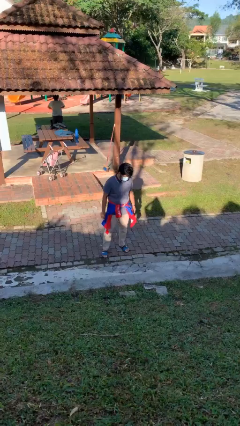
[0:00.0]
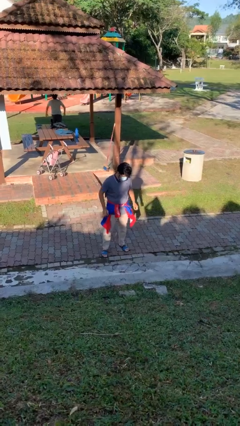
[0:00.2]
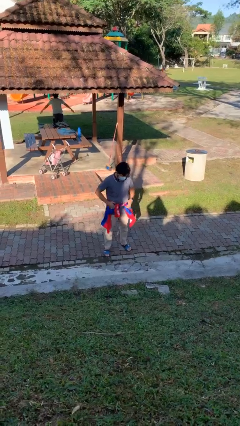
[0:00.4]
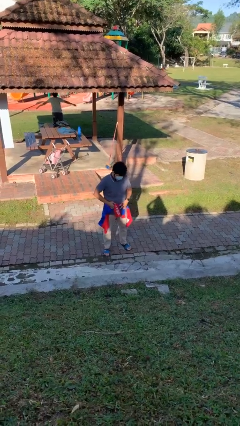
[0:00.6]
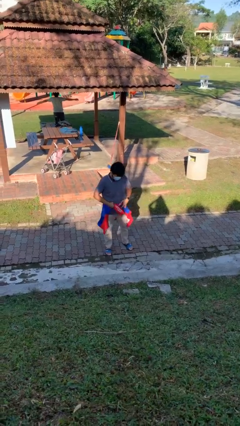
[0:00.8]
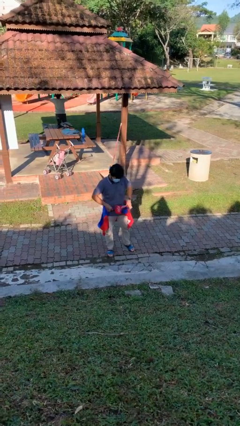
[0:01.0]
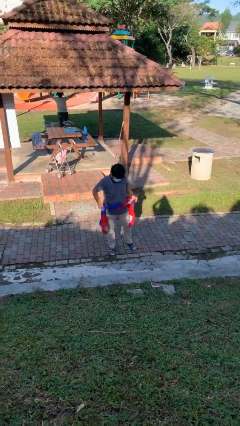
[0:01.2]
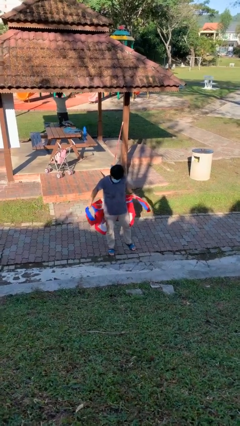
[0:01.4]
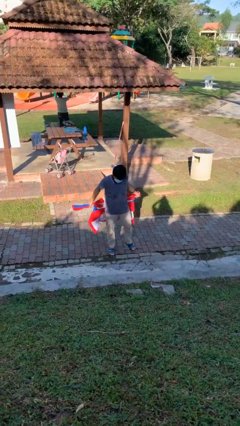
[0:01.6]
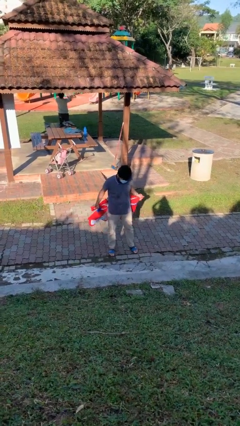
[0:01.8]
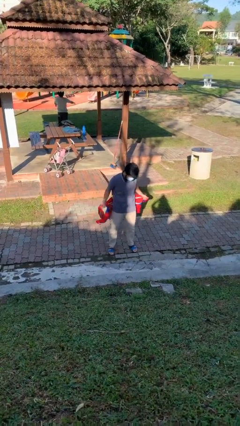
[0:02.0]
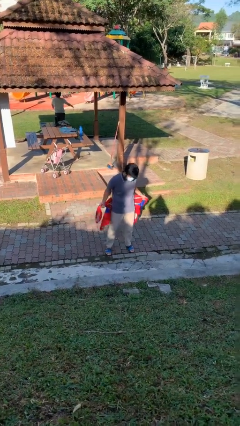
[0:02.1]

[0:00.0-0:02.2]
person unties jacket around waist

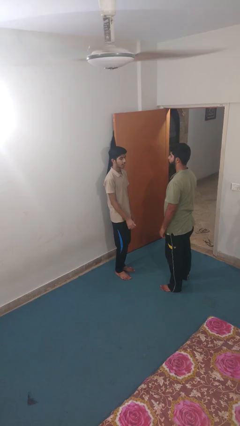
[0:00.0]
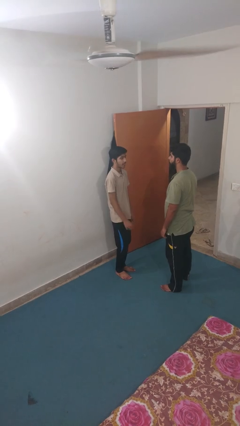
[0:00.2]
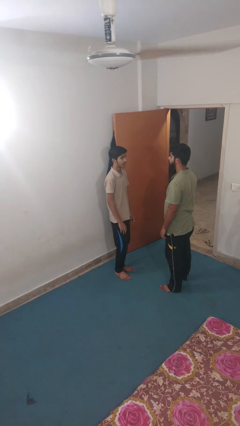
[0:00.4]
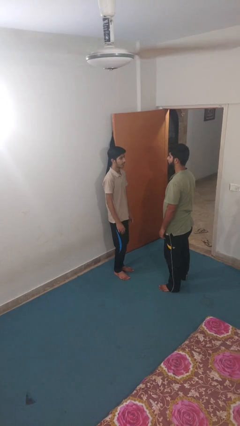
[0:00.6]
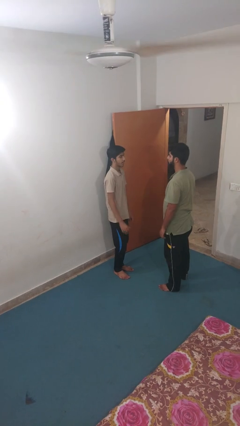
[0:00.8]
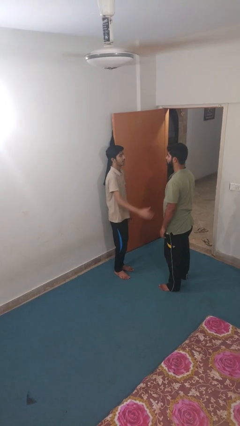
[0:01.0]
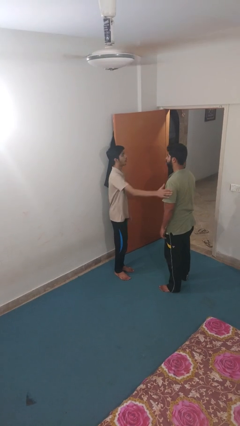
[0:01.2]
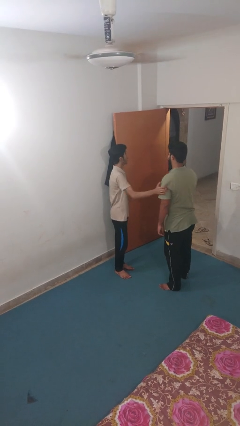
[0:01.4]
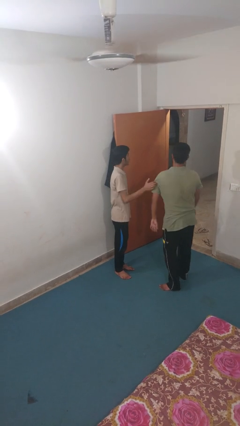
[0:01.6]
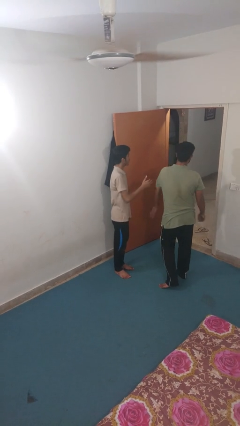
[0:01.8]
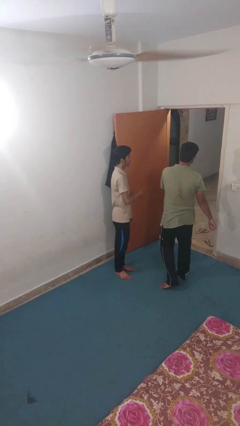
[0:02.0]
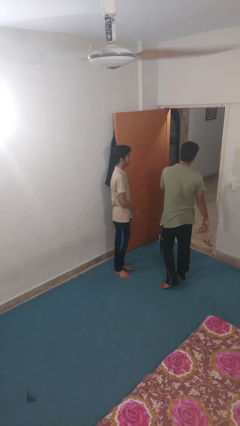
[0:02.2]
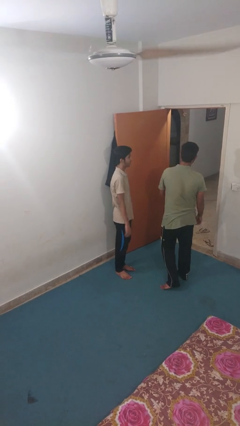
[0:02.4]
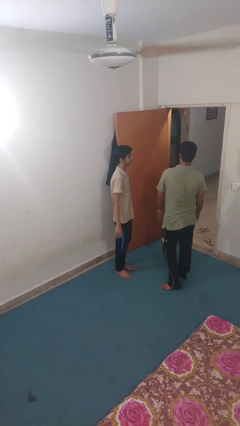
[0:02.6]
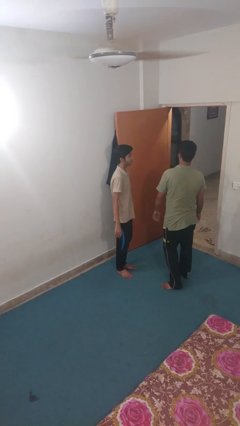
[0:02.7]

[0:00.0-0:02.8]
person shoves person

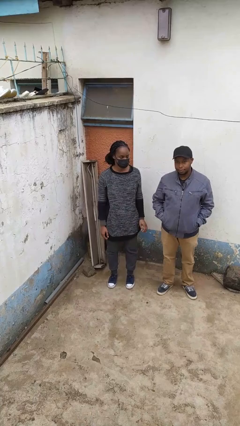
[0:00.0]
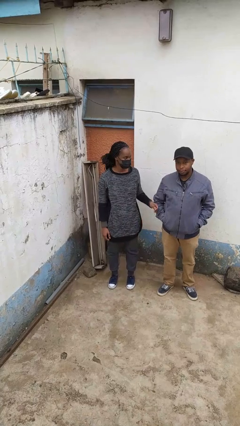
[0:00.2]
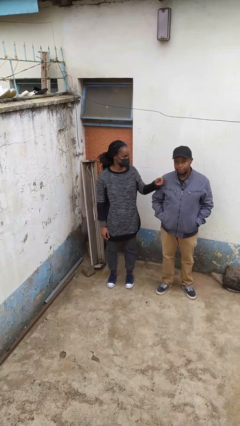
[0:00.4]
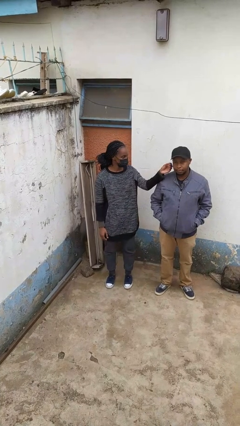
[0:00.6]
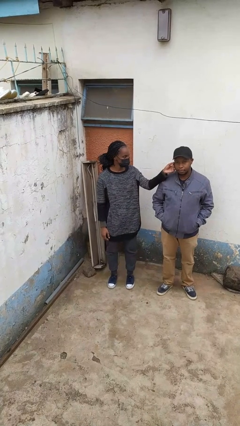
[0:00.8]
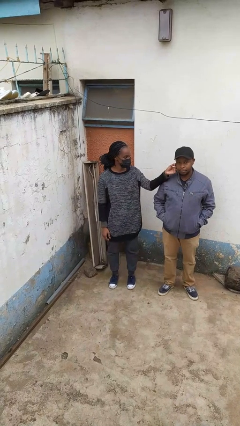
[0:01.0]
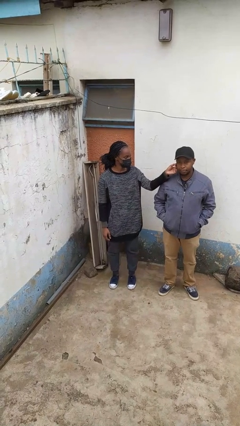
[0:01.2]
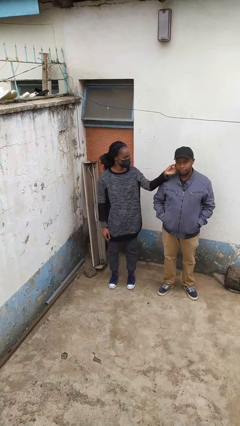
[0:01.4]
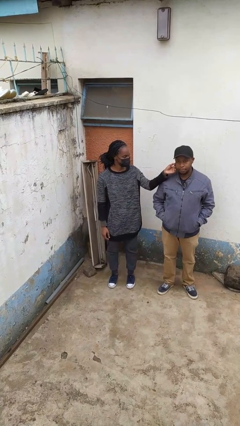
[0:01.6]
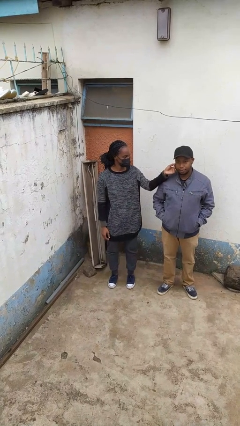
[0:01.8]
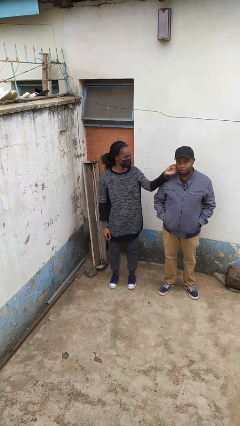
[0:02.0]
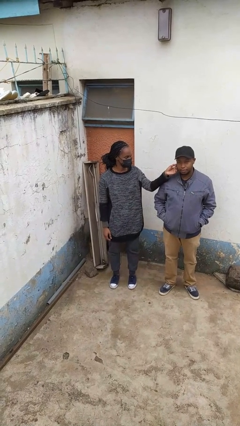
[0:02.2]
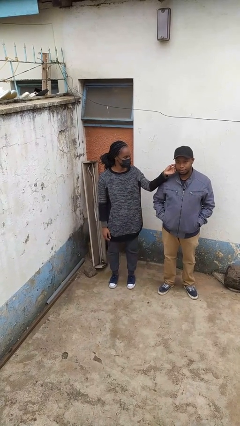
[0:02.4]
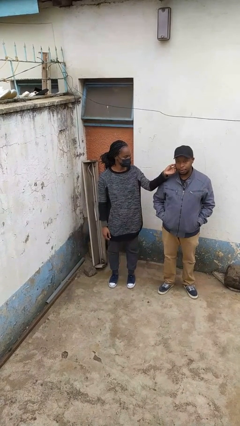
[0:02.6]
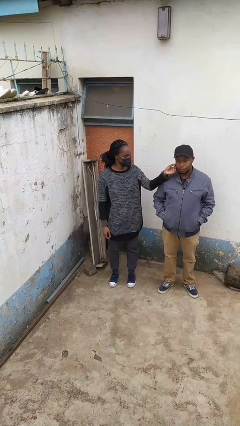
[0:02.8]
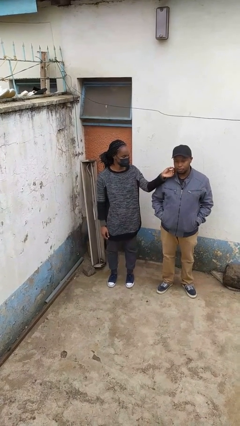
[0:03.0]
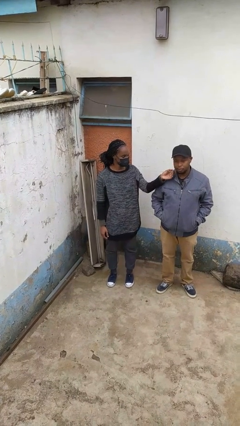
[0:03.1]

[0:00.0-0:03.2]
person touches face of person

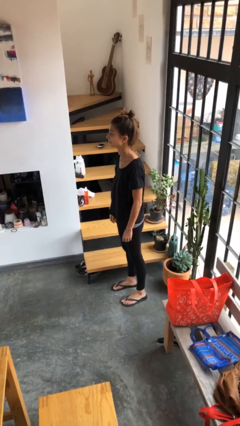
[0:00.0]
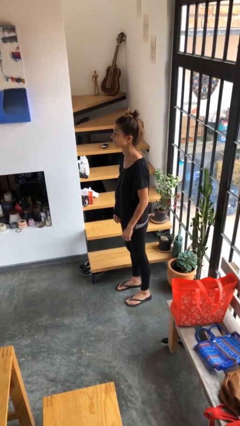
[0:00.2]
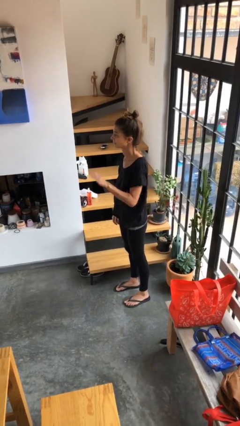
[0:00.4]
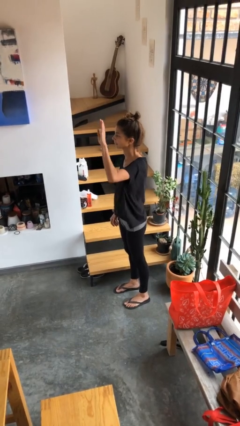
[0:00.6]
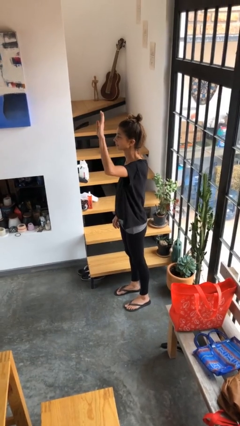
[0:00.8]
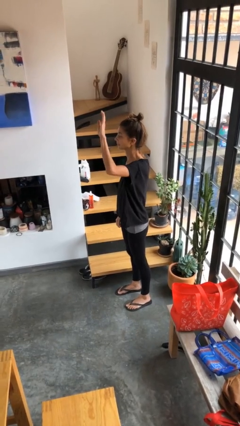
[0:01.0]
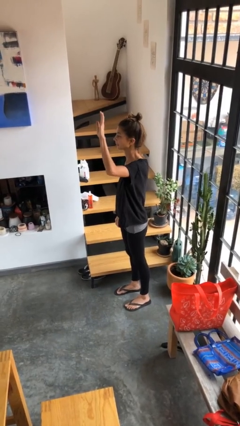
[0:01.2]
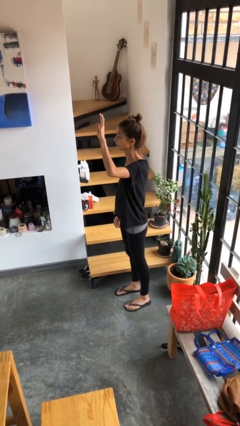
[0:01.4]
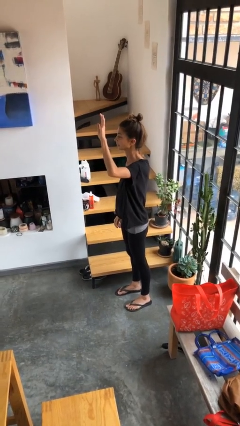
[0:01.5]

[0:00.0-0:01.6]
person gestures raise hand

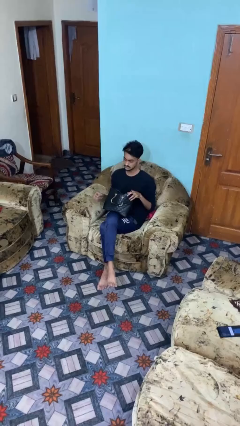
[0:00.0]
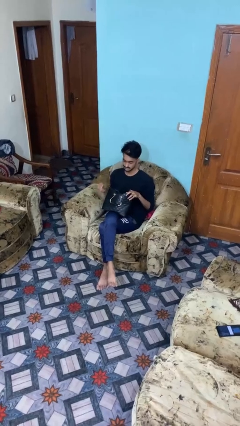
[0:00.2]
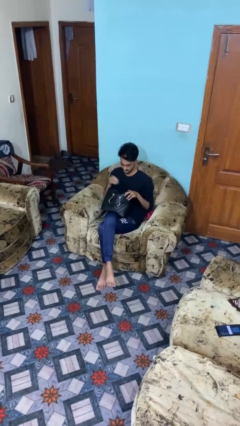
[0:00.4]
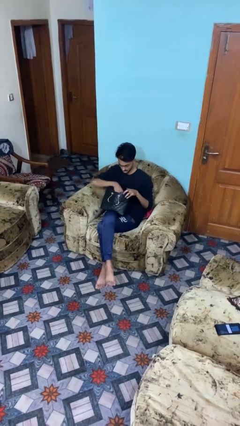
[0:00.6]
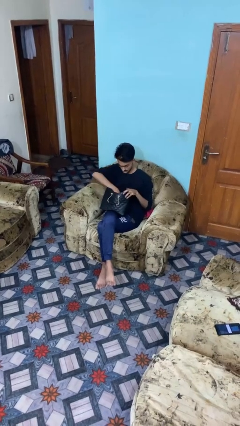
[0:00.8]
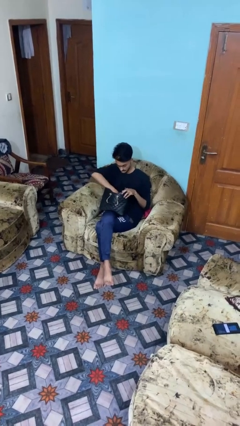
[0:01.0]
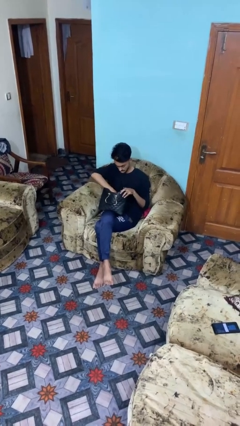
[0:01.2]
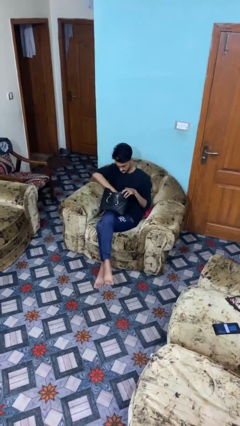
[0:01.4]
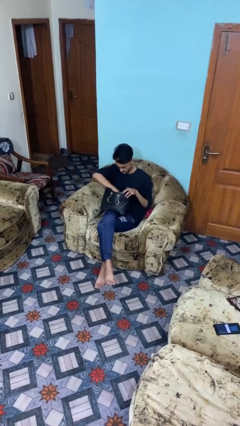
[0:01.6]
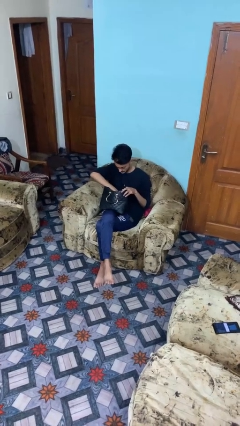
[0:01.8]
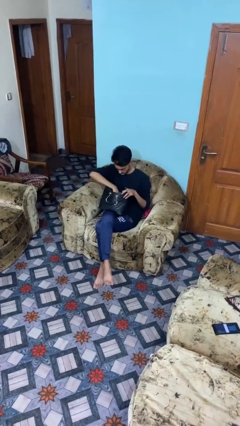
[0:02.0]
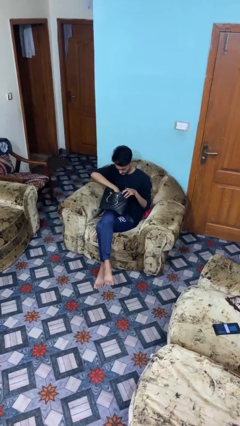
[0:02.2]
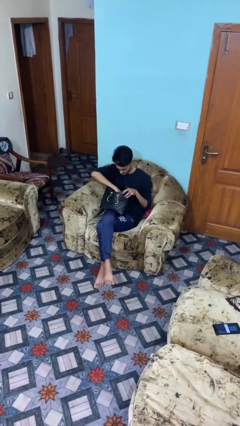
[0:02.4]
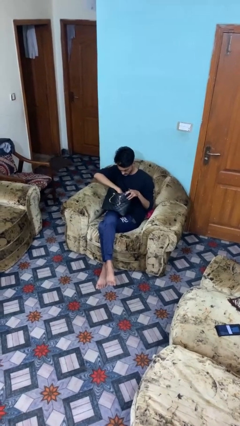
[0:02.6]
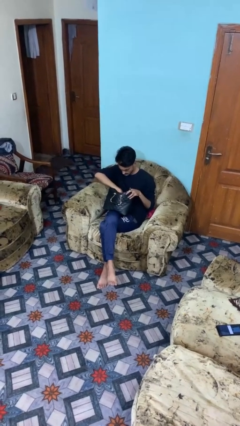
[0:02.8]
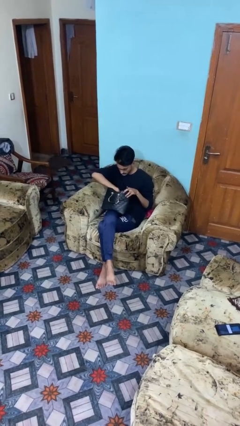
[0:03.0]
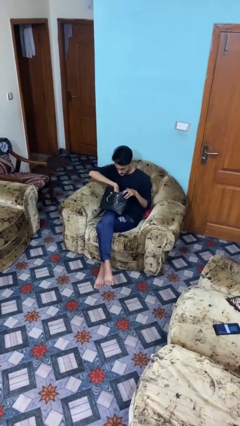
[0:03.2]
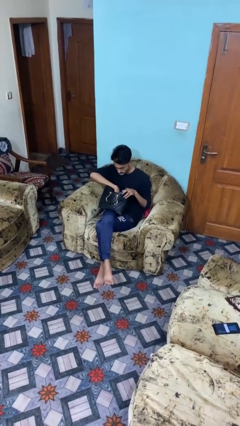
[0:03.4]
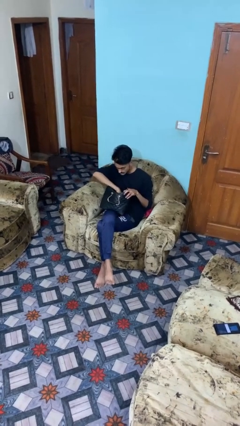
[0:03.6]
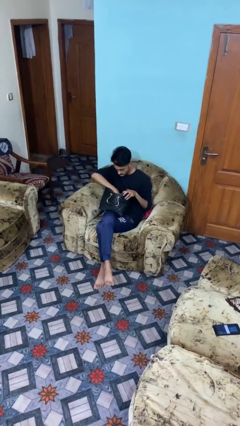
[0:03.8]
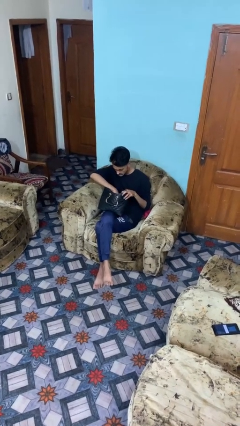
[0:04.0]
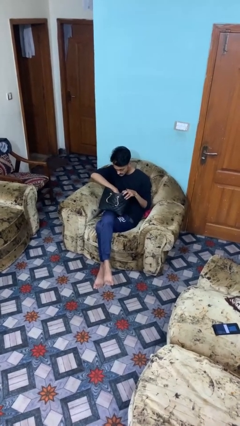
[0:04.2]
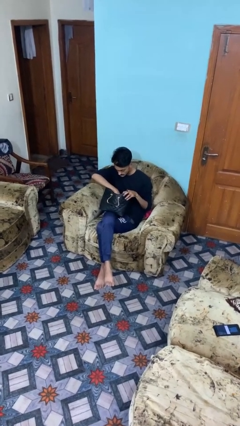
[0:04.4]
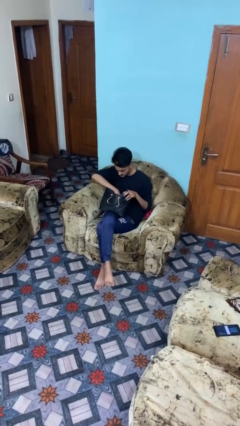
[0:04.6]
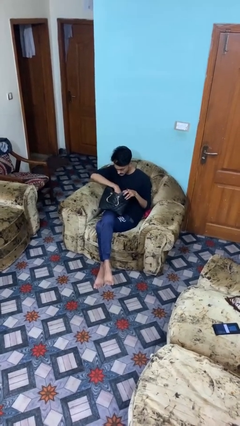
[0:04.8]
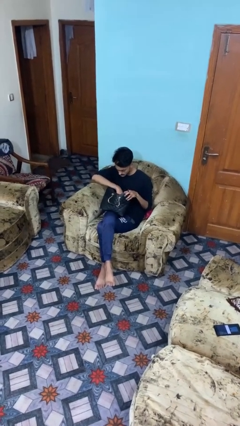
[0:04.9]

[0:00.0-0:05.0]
person searches in purse

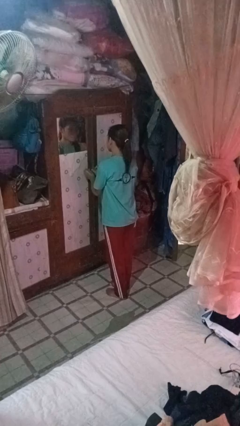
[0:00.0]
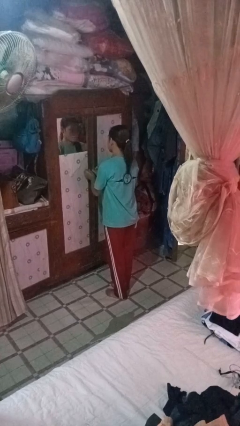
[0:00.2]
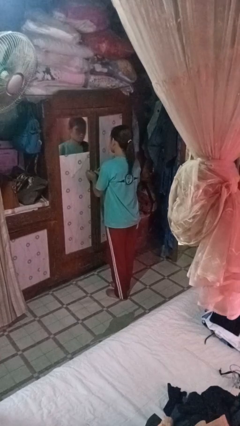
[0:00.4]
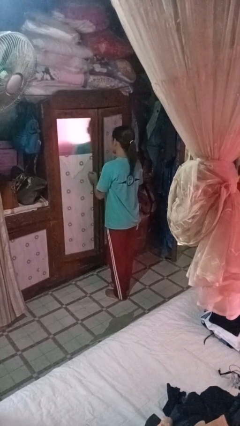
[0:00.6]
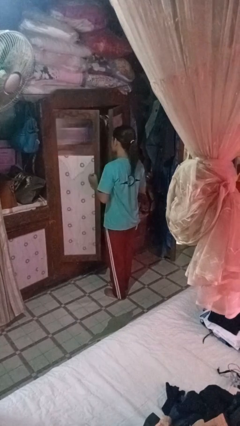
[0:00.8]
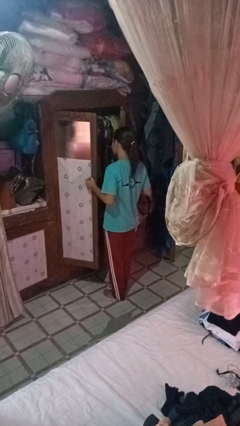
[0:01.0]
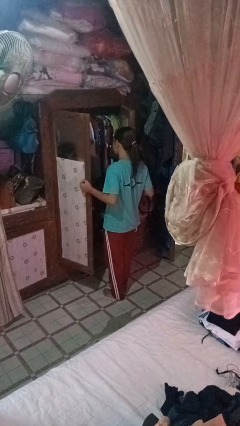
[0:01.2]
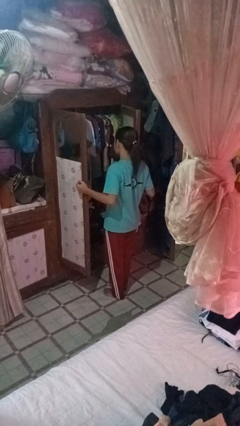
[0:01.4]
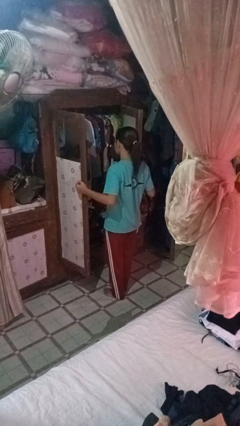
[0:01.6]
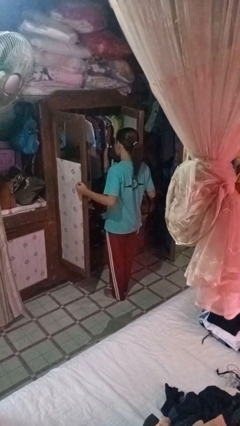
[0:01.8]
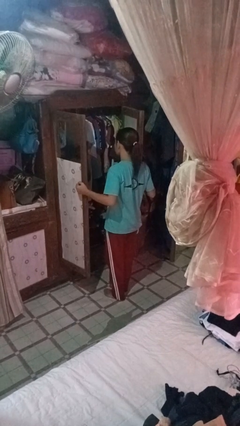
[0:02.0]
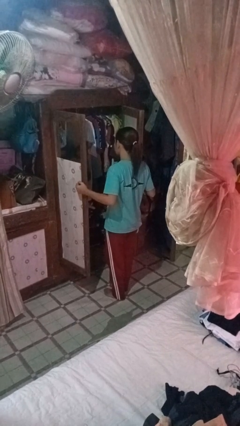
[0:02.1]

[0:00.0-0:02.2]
person opens closet door
